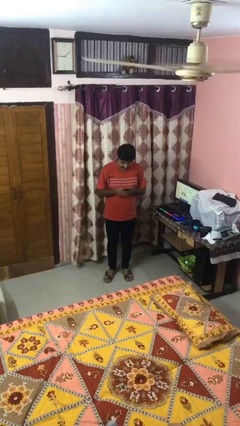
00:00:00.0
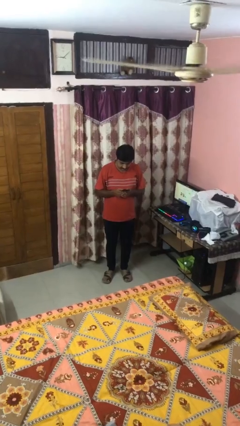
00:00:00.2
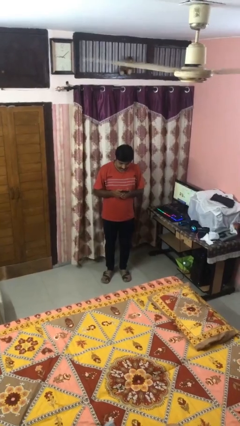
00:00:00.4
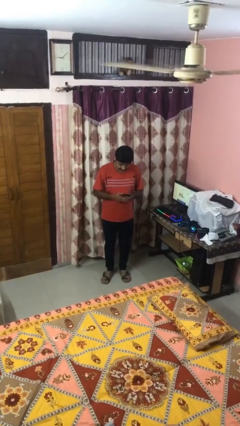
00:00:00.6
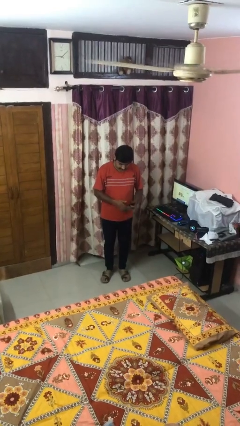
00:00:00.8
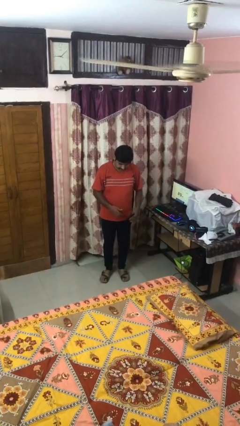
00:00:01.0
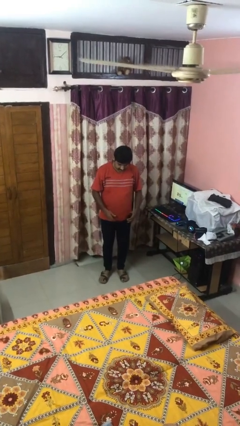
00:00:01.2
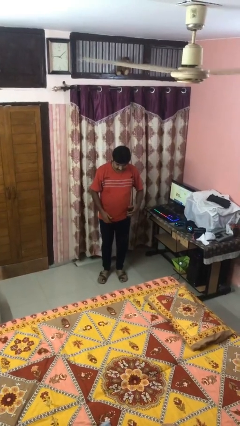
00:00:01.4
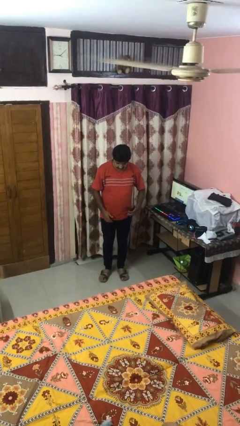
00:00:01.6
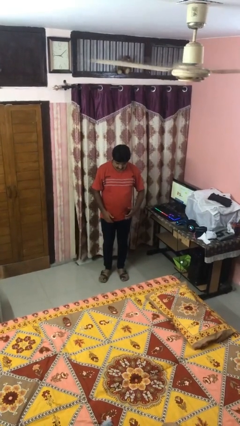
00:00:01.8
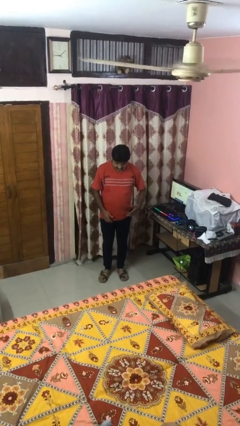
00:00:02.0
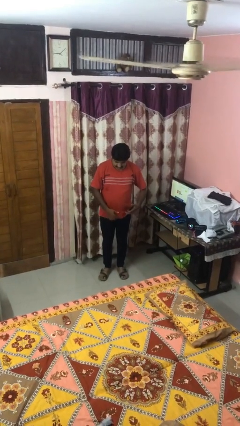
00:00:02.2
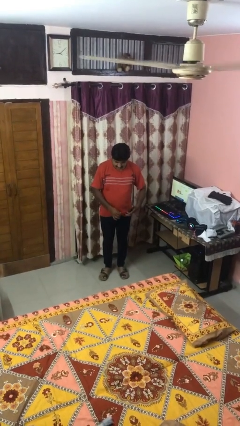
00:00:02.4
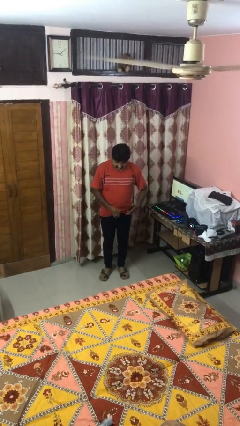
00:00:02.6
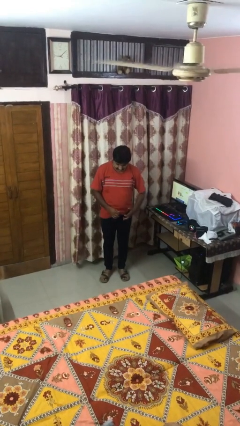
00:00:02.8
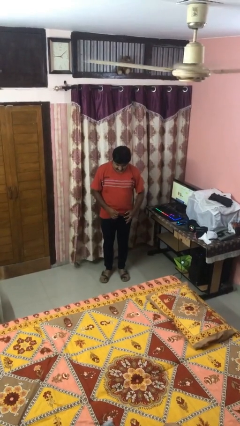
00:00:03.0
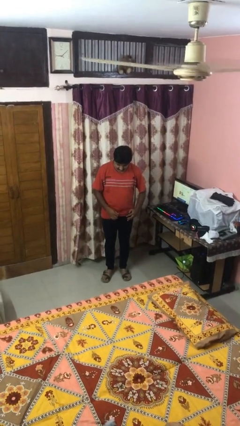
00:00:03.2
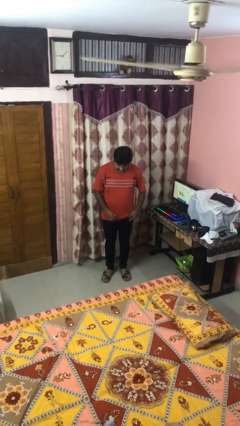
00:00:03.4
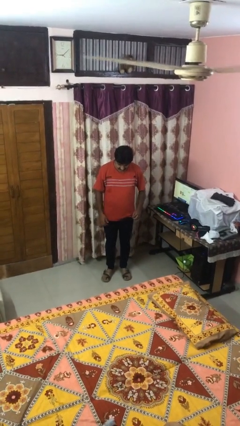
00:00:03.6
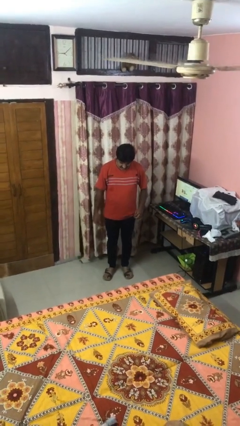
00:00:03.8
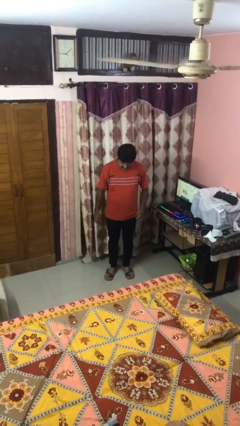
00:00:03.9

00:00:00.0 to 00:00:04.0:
person puts phone into pocket

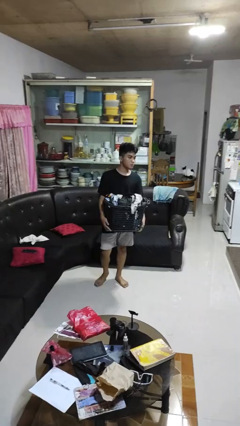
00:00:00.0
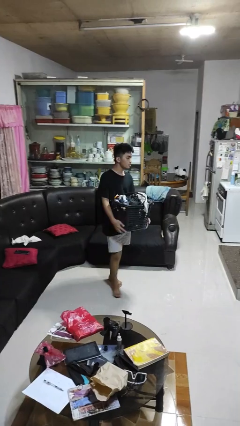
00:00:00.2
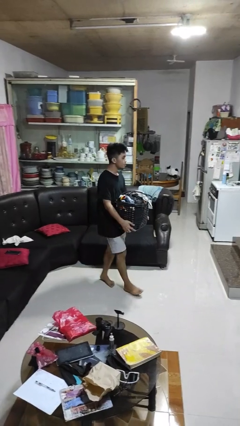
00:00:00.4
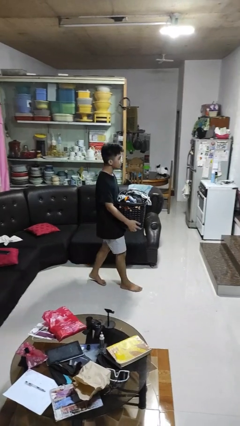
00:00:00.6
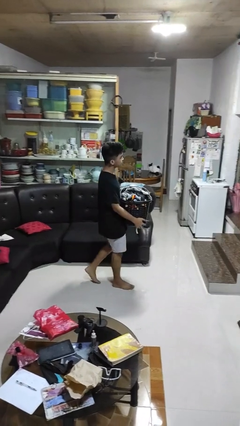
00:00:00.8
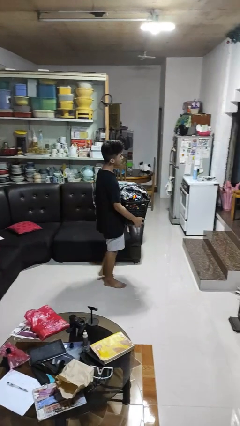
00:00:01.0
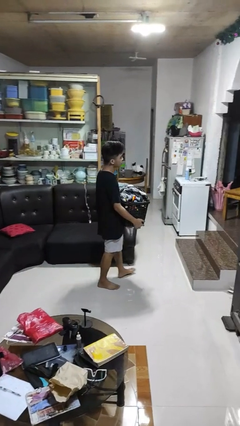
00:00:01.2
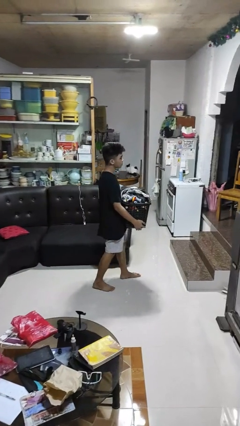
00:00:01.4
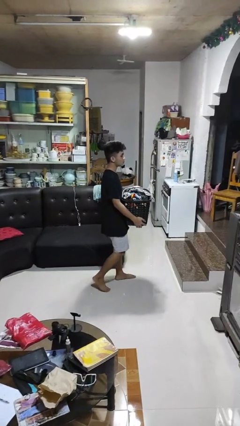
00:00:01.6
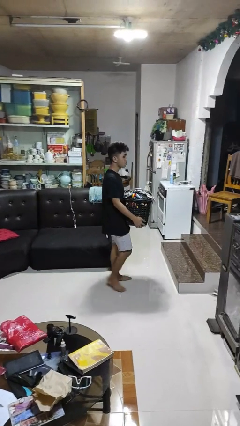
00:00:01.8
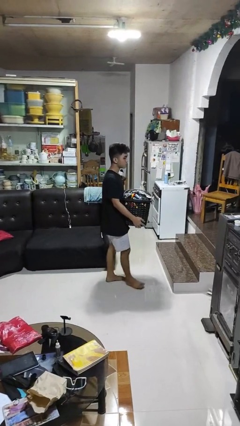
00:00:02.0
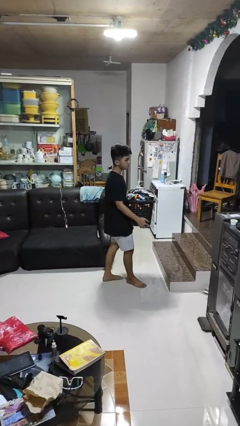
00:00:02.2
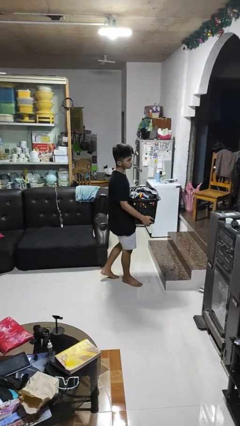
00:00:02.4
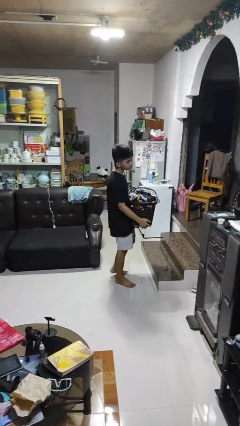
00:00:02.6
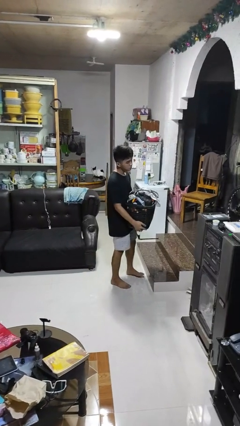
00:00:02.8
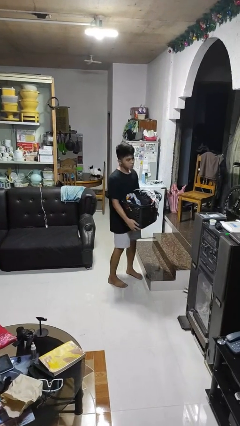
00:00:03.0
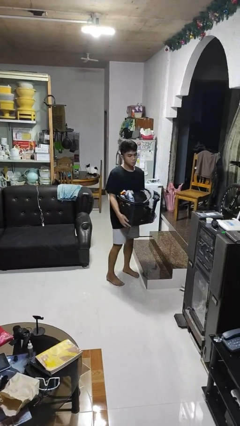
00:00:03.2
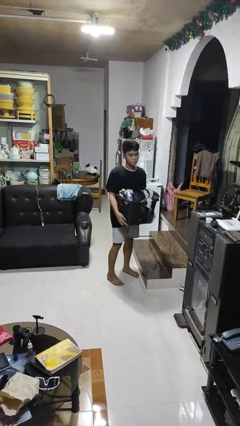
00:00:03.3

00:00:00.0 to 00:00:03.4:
person carries laundry basket

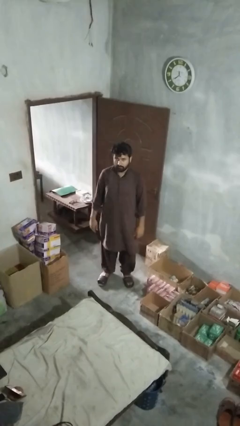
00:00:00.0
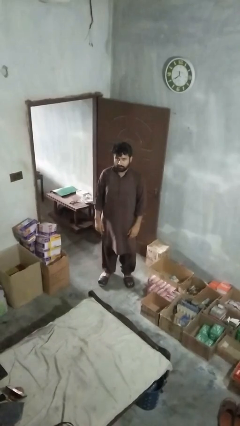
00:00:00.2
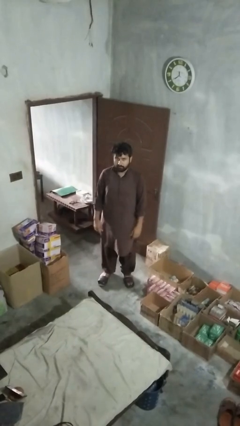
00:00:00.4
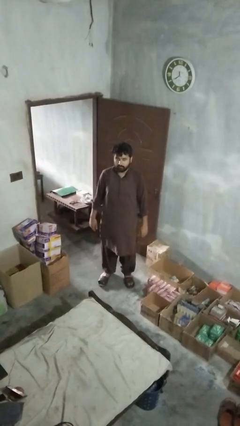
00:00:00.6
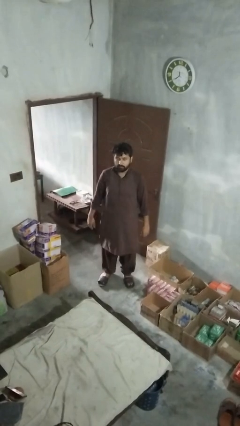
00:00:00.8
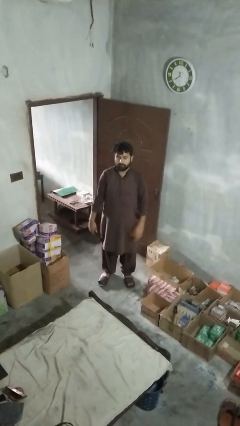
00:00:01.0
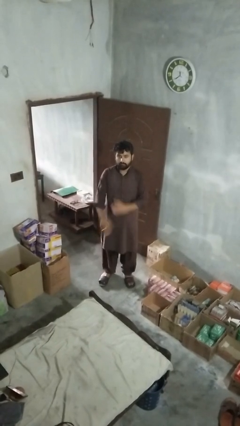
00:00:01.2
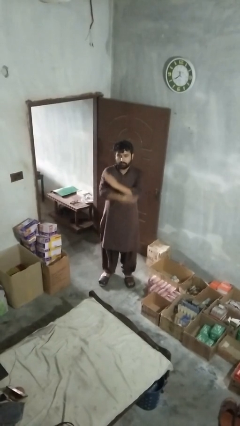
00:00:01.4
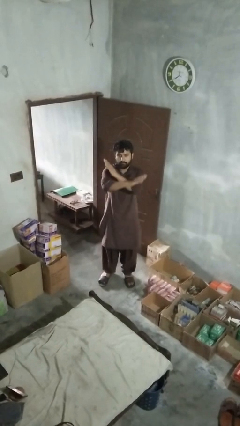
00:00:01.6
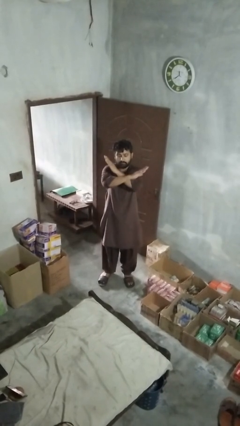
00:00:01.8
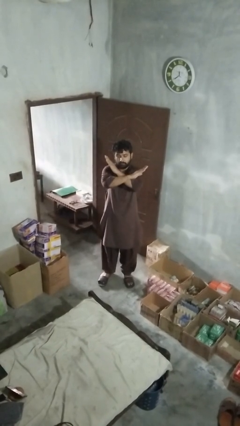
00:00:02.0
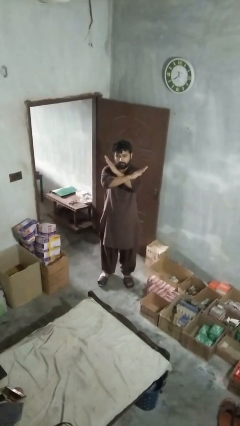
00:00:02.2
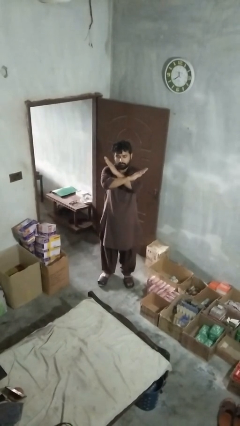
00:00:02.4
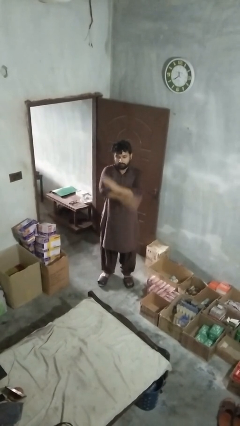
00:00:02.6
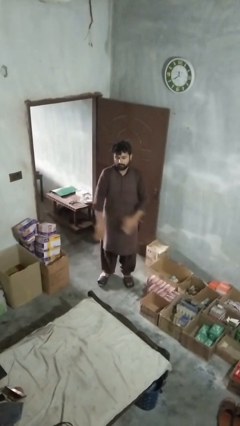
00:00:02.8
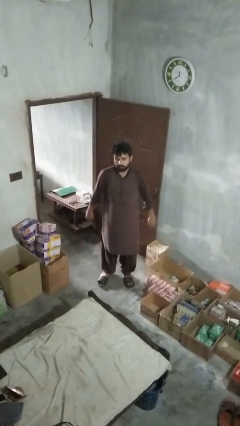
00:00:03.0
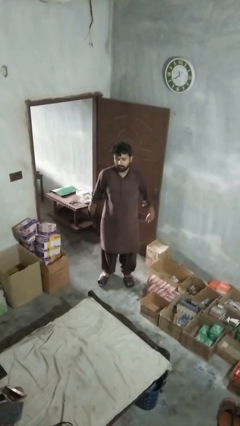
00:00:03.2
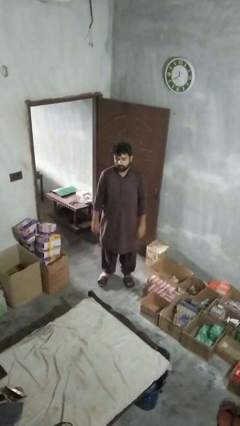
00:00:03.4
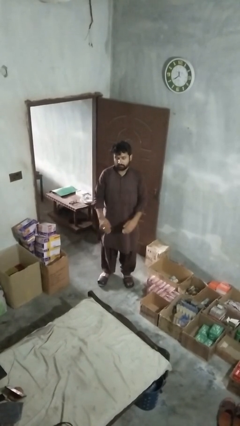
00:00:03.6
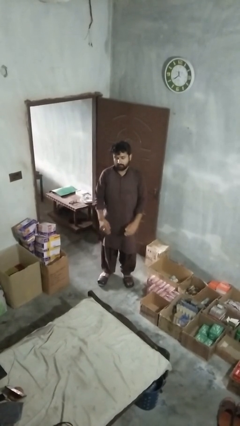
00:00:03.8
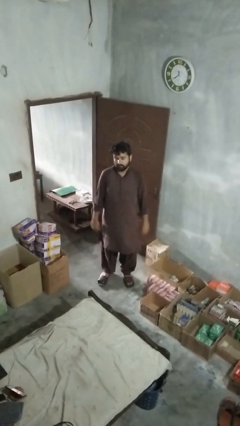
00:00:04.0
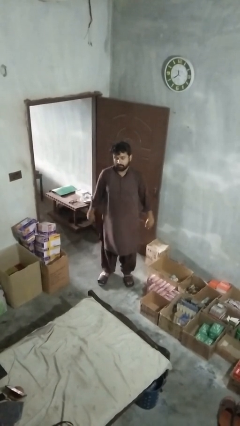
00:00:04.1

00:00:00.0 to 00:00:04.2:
person gestures arms x

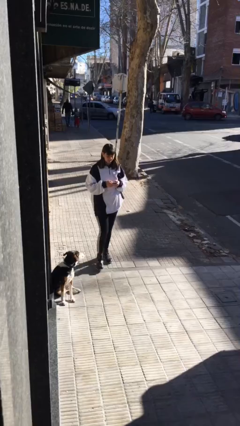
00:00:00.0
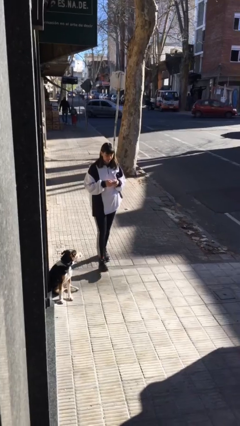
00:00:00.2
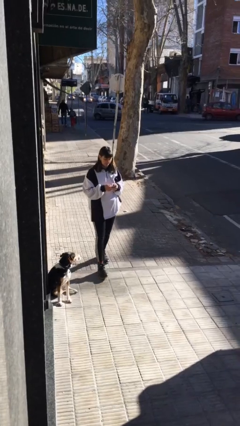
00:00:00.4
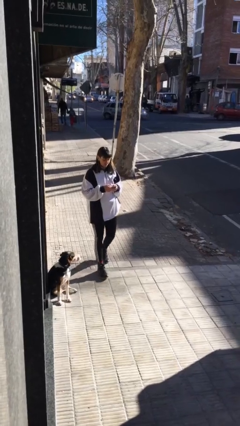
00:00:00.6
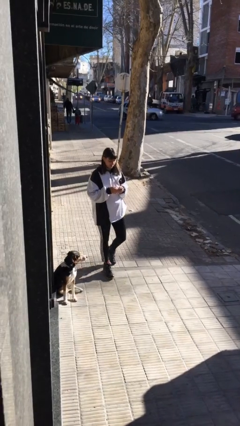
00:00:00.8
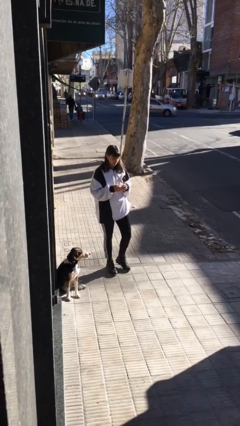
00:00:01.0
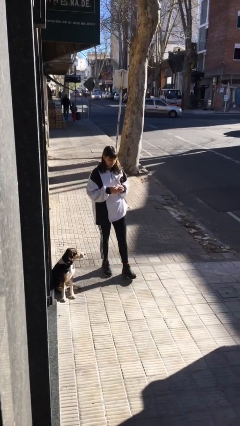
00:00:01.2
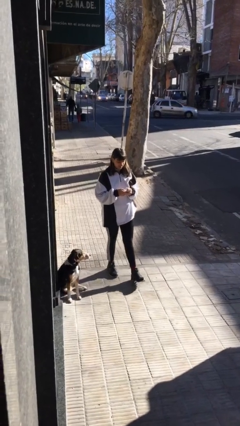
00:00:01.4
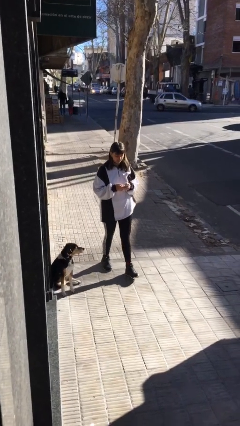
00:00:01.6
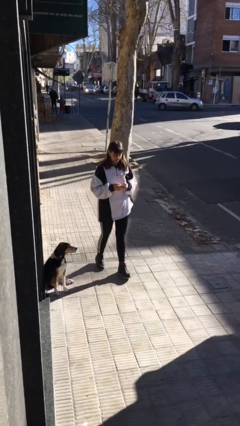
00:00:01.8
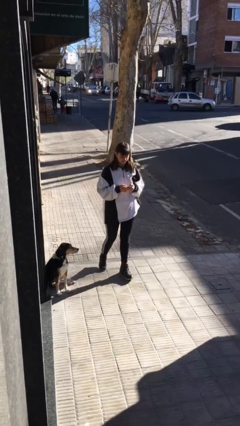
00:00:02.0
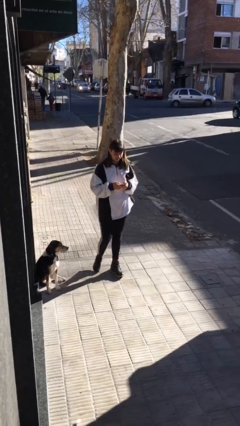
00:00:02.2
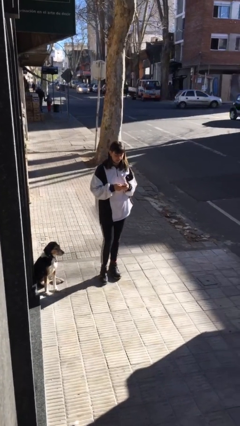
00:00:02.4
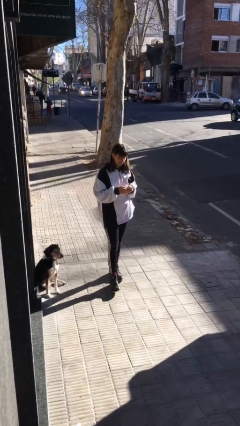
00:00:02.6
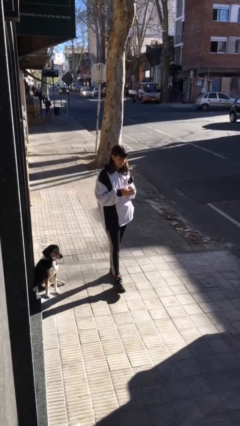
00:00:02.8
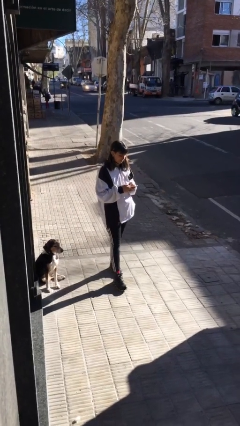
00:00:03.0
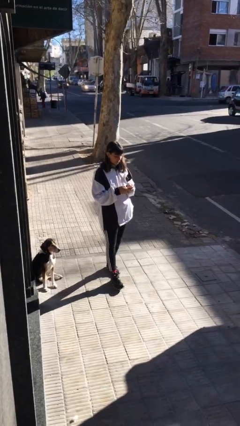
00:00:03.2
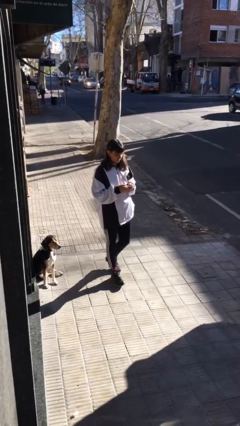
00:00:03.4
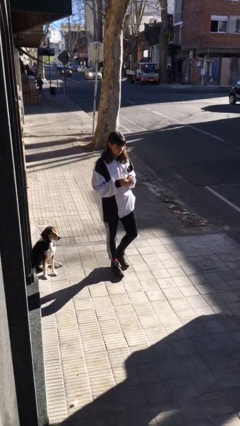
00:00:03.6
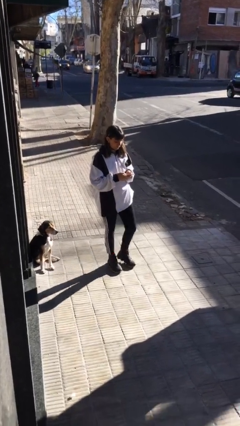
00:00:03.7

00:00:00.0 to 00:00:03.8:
person texts on phone

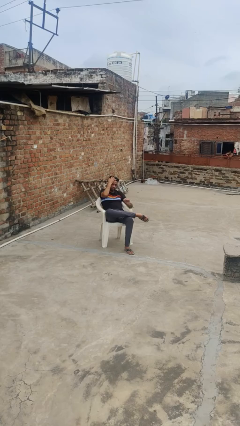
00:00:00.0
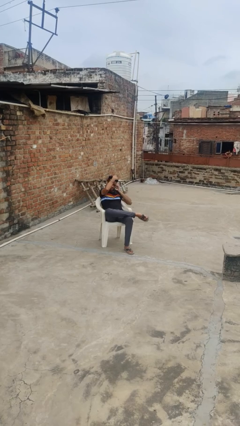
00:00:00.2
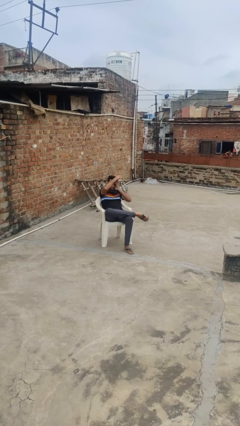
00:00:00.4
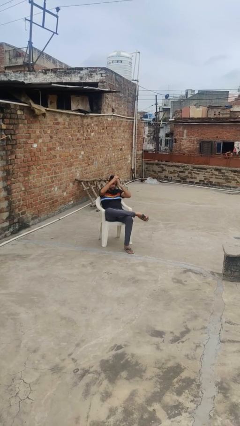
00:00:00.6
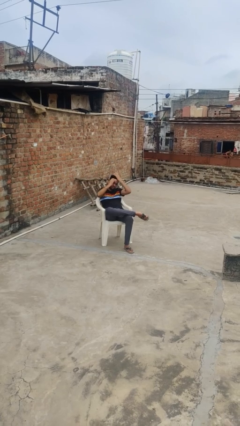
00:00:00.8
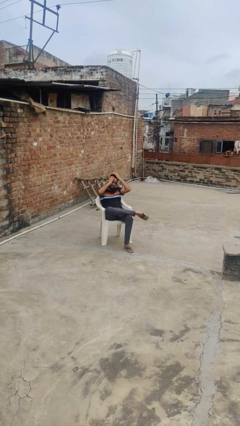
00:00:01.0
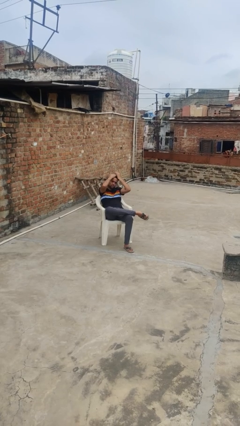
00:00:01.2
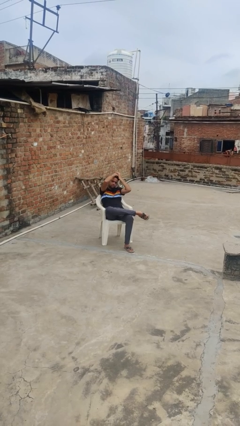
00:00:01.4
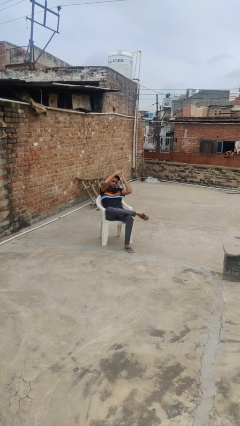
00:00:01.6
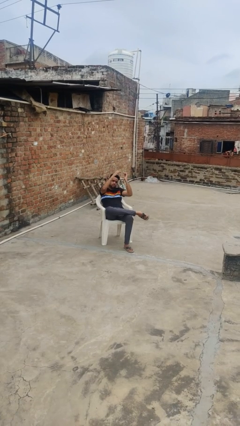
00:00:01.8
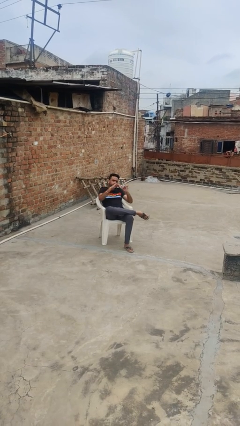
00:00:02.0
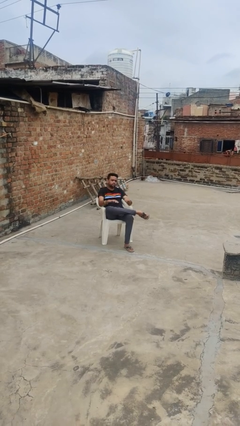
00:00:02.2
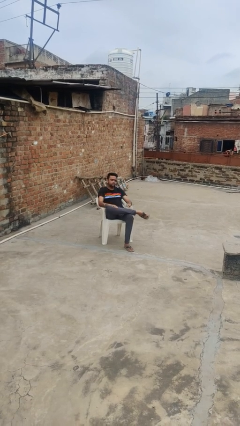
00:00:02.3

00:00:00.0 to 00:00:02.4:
person strokes hair
